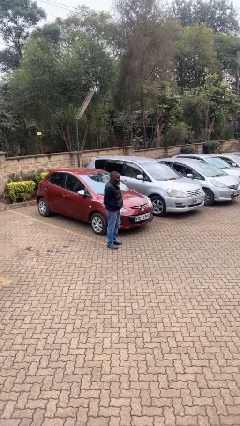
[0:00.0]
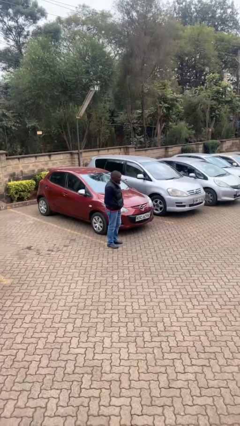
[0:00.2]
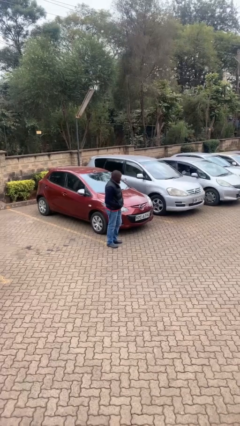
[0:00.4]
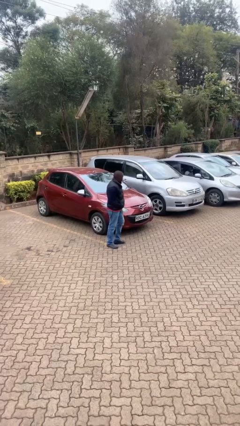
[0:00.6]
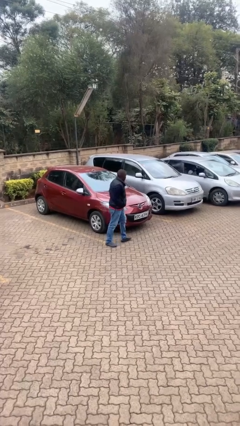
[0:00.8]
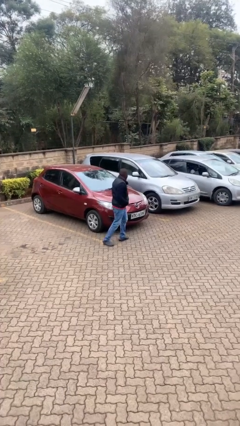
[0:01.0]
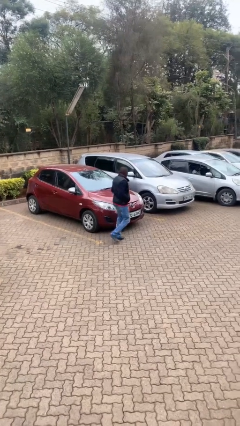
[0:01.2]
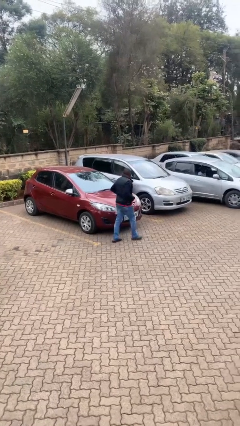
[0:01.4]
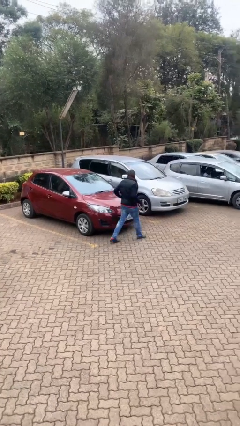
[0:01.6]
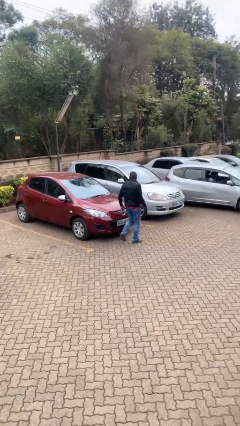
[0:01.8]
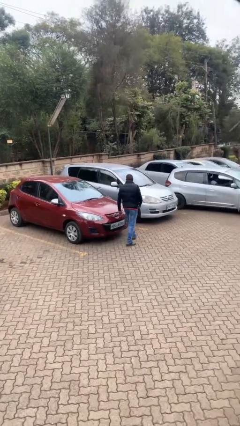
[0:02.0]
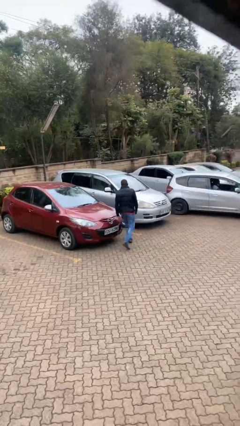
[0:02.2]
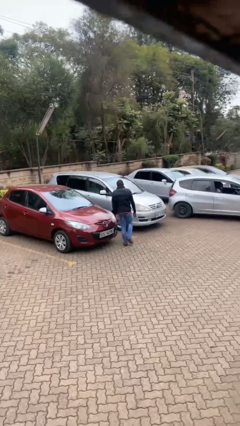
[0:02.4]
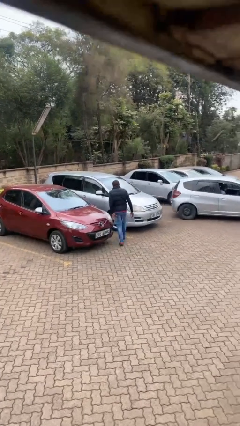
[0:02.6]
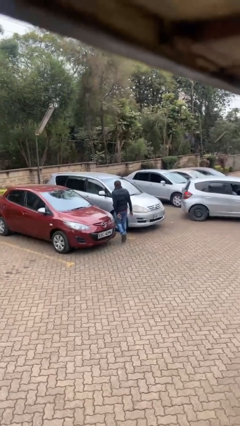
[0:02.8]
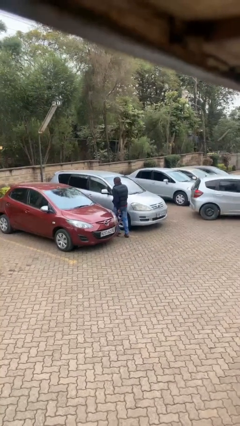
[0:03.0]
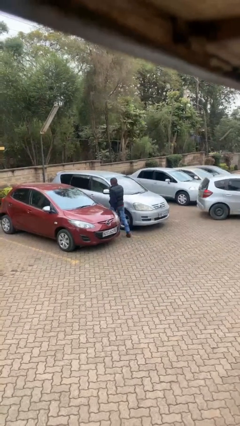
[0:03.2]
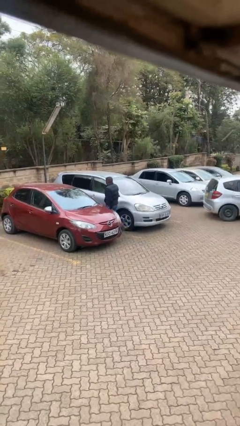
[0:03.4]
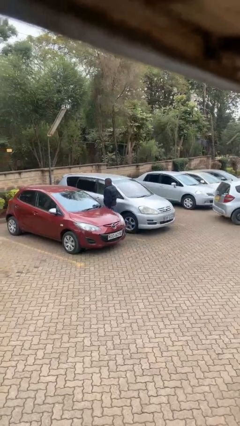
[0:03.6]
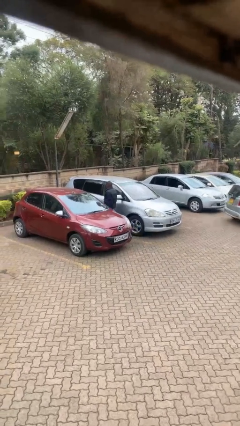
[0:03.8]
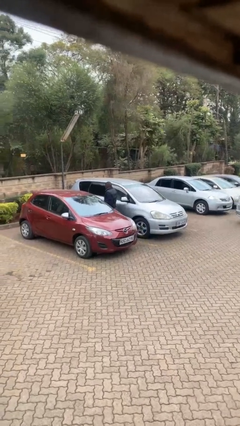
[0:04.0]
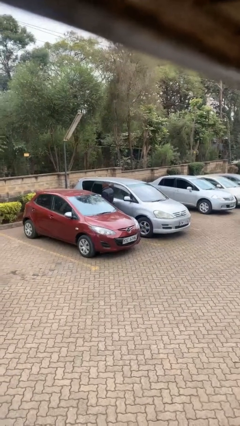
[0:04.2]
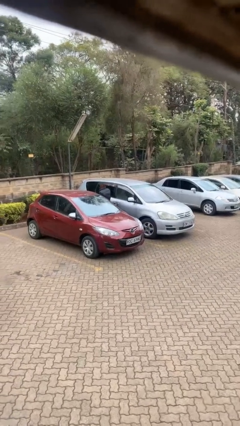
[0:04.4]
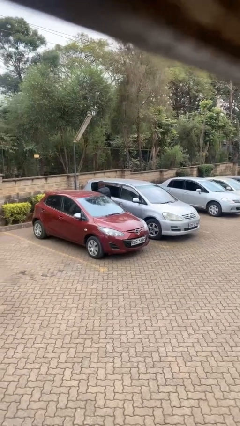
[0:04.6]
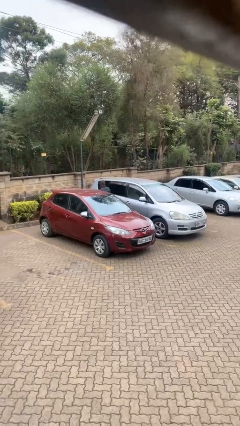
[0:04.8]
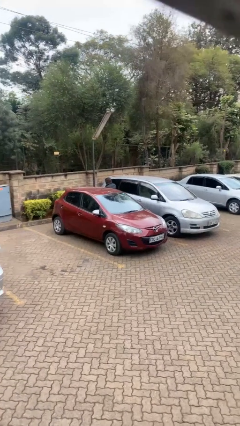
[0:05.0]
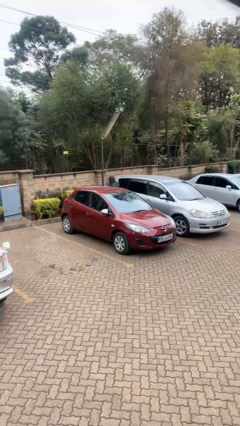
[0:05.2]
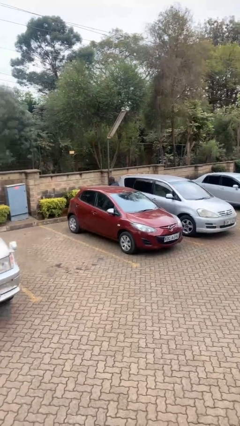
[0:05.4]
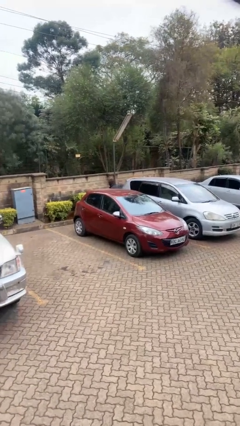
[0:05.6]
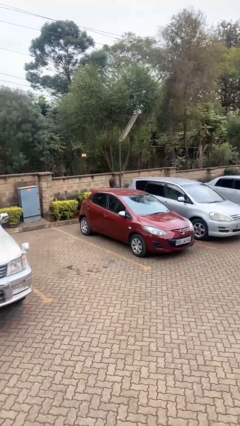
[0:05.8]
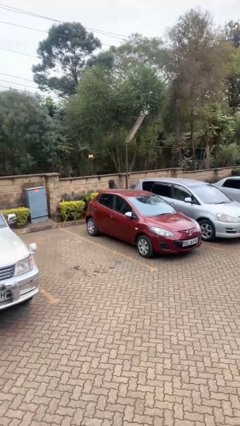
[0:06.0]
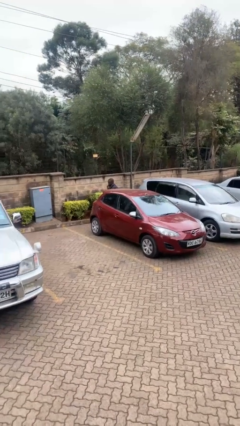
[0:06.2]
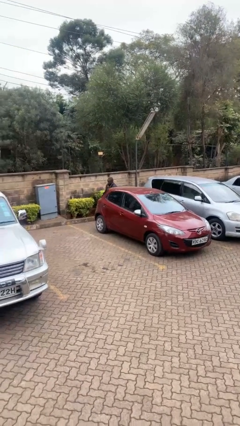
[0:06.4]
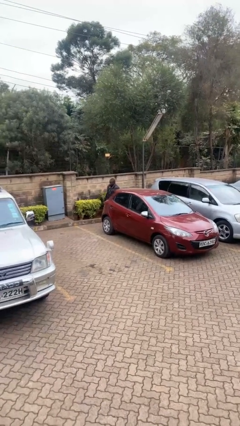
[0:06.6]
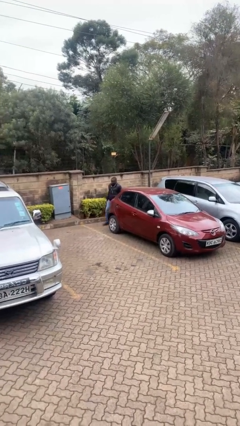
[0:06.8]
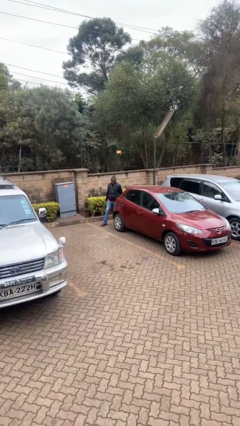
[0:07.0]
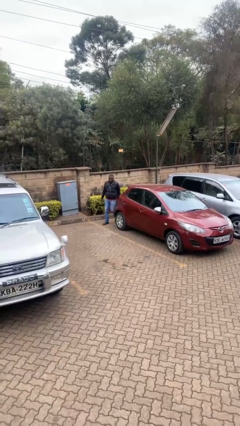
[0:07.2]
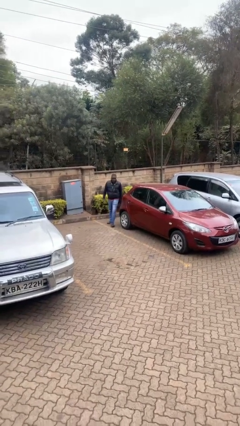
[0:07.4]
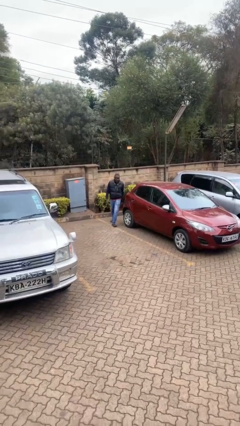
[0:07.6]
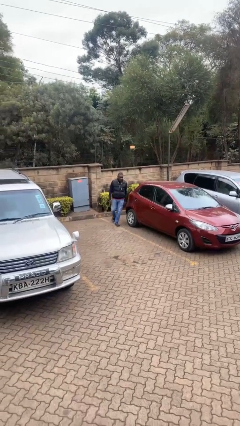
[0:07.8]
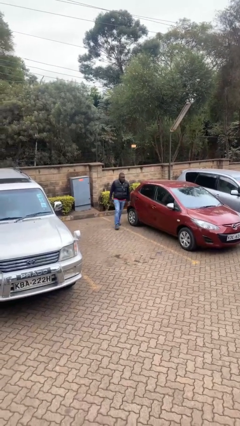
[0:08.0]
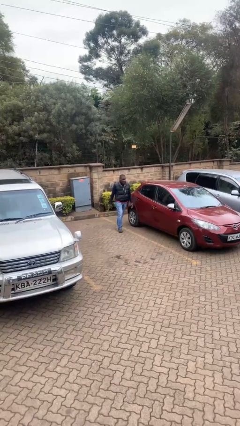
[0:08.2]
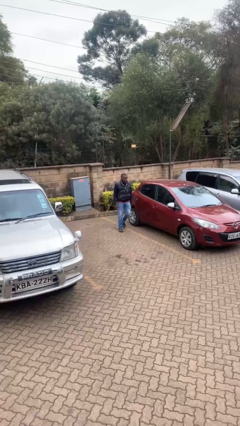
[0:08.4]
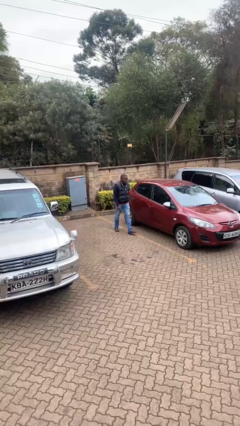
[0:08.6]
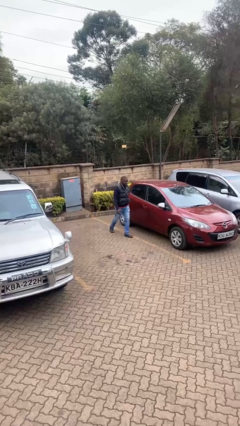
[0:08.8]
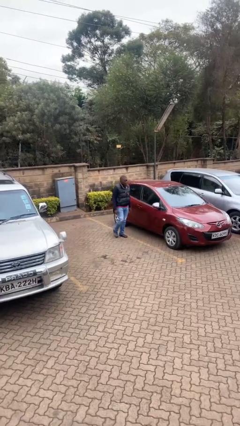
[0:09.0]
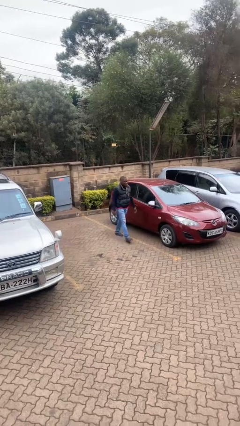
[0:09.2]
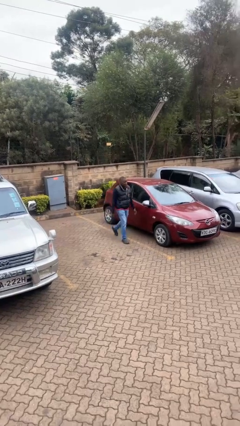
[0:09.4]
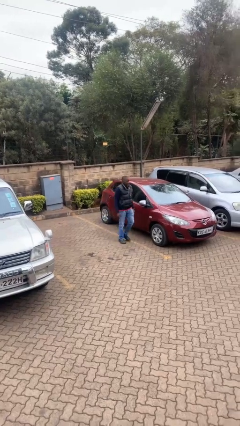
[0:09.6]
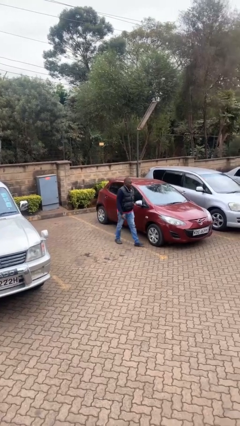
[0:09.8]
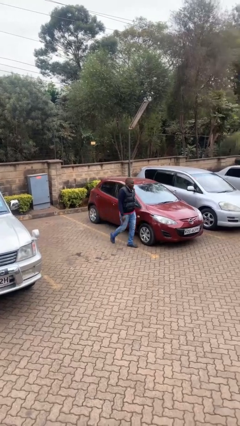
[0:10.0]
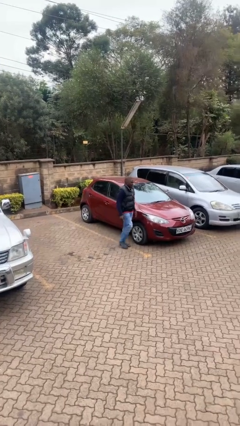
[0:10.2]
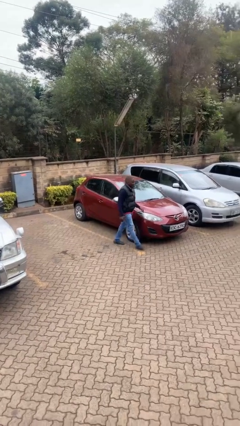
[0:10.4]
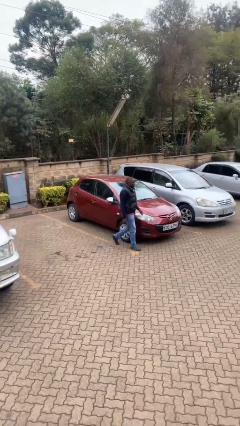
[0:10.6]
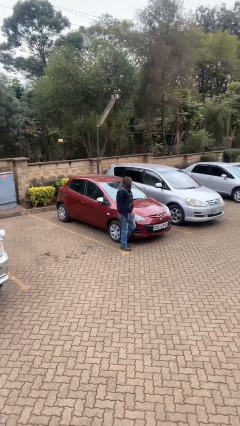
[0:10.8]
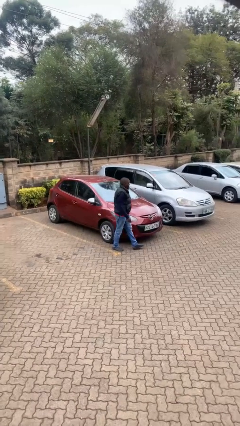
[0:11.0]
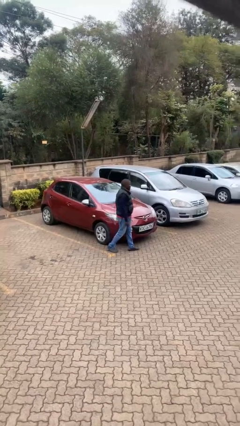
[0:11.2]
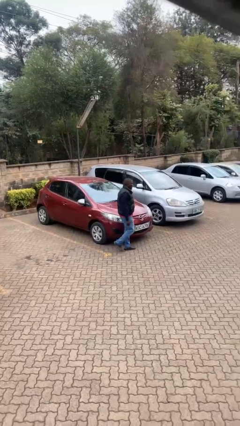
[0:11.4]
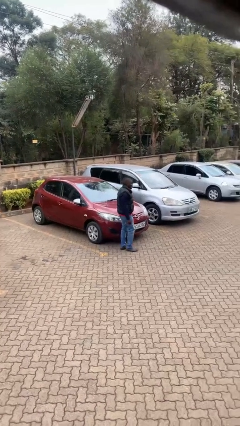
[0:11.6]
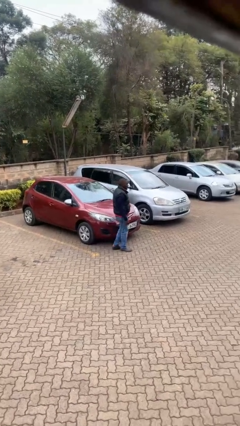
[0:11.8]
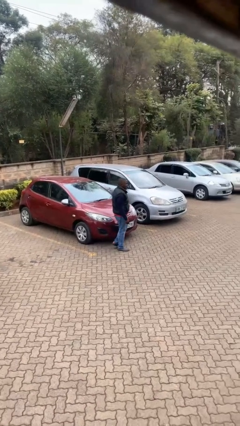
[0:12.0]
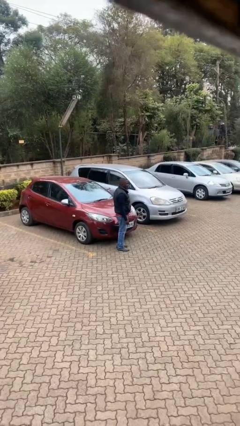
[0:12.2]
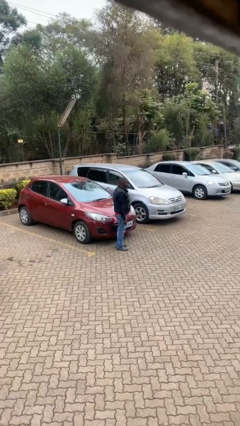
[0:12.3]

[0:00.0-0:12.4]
person walks around car

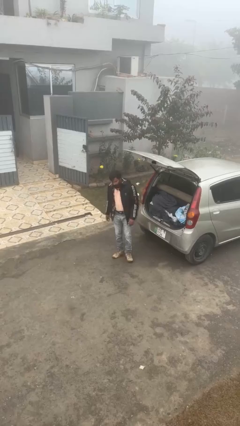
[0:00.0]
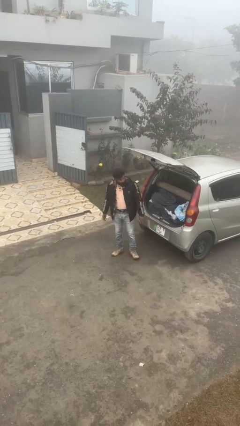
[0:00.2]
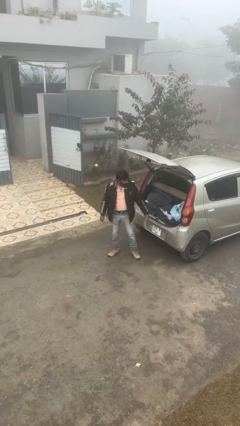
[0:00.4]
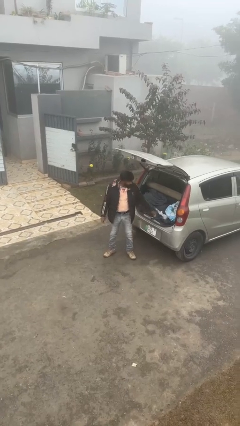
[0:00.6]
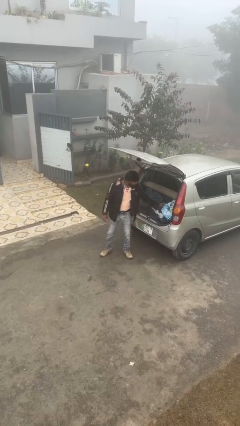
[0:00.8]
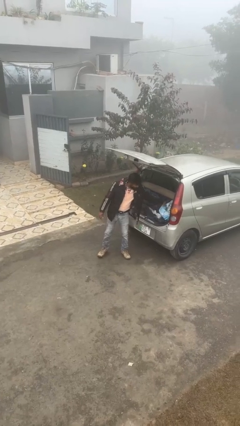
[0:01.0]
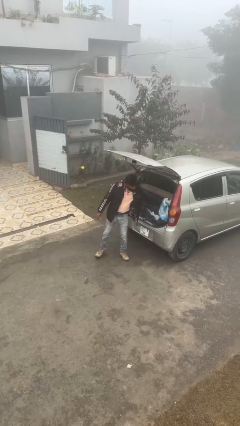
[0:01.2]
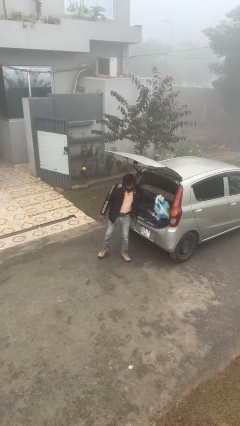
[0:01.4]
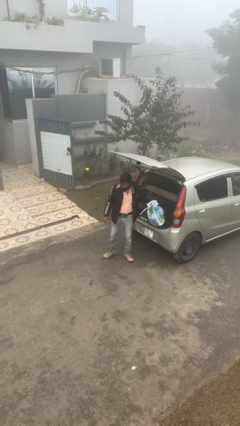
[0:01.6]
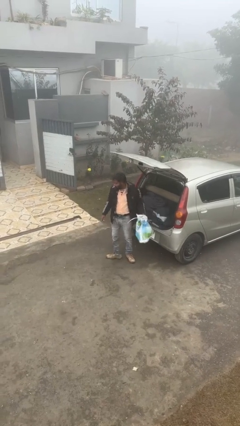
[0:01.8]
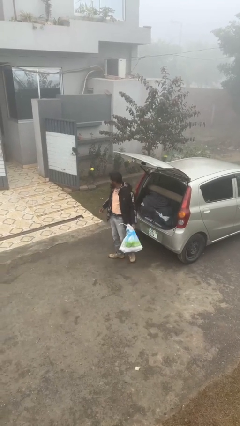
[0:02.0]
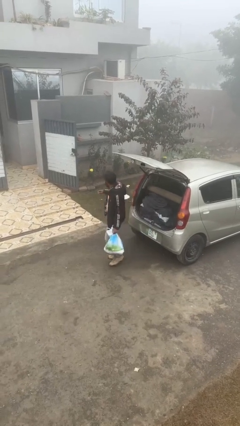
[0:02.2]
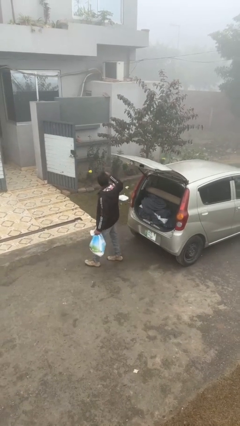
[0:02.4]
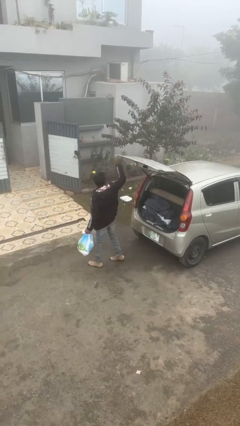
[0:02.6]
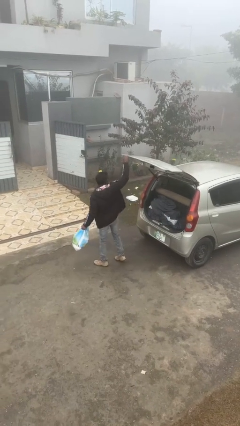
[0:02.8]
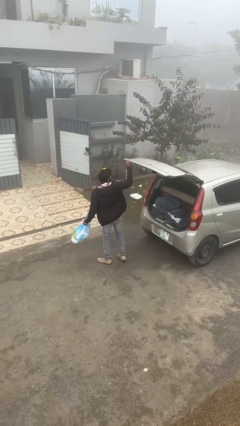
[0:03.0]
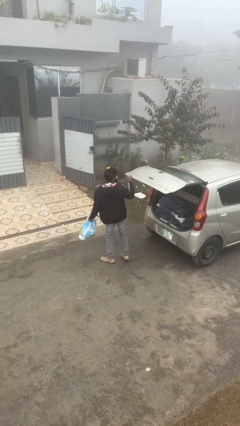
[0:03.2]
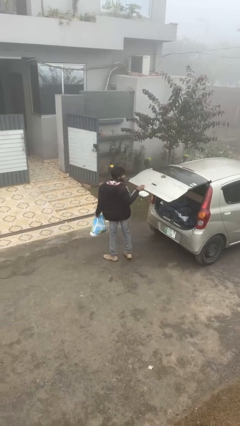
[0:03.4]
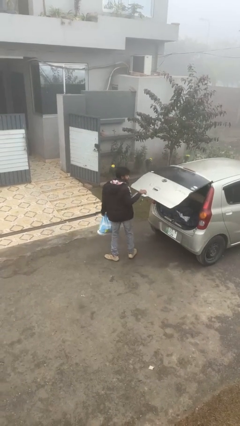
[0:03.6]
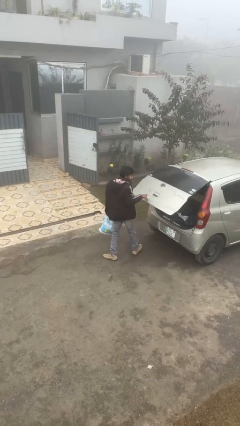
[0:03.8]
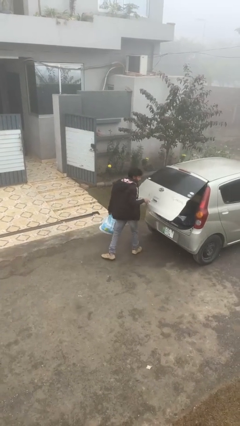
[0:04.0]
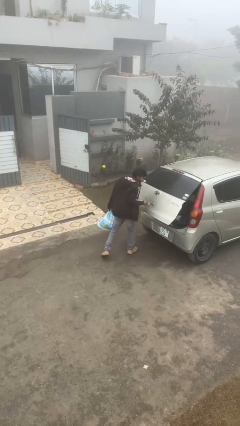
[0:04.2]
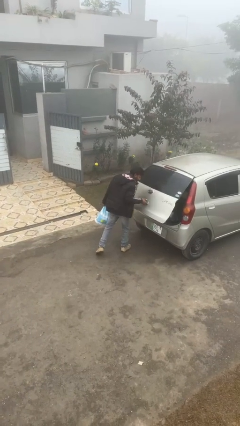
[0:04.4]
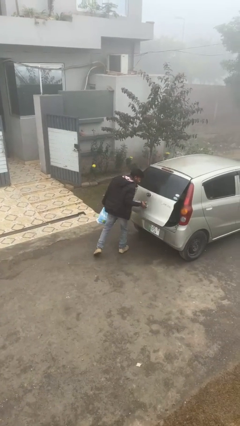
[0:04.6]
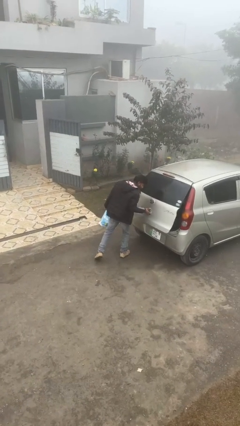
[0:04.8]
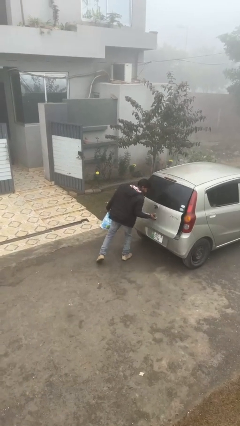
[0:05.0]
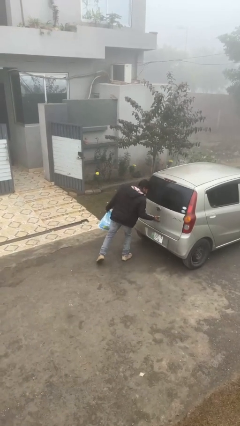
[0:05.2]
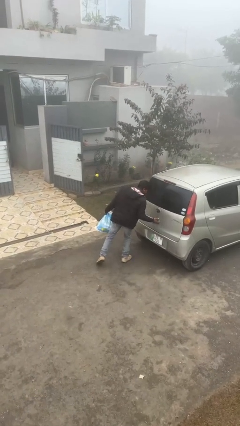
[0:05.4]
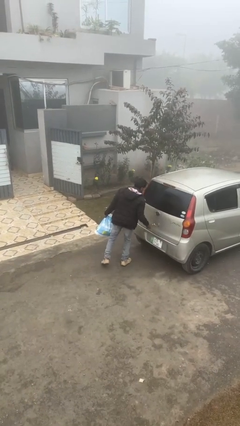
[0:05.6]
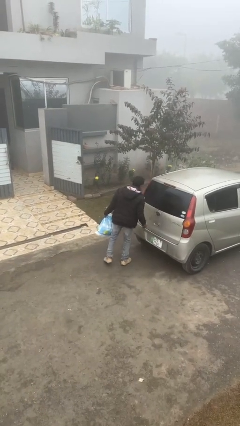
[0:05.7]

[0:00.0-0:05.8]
person unloads car
